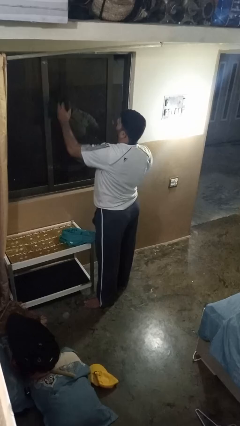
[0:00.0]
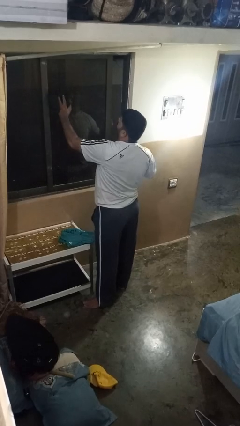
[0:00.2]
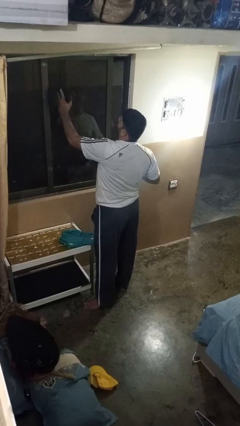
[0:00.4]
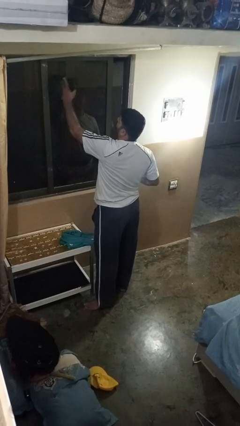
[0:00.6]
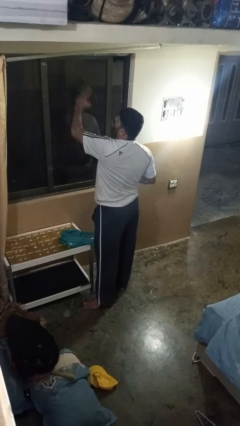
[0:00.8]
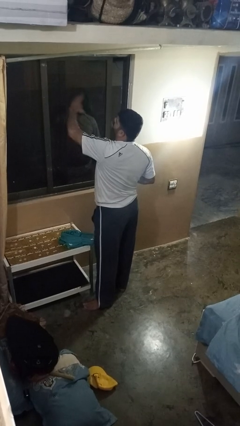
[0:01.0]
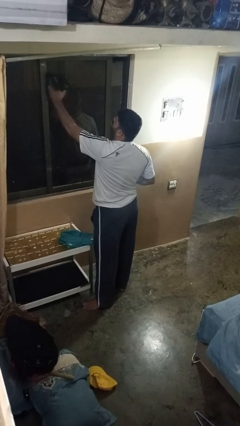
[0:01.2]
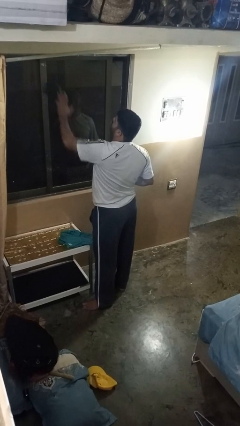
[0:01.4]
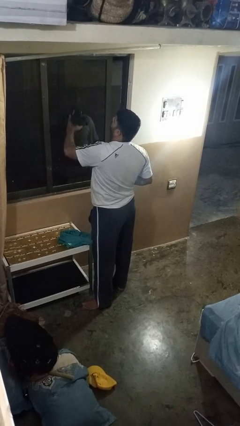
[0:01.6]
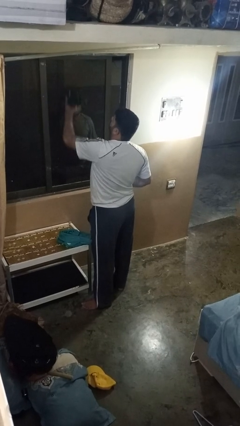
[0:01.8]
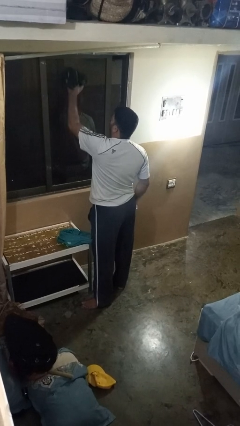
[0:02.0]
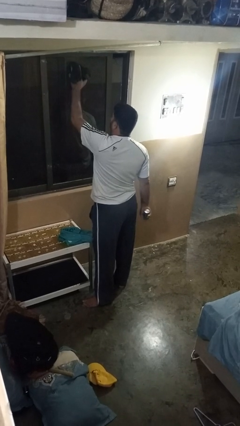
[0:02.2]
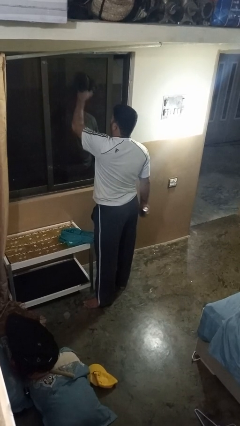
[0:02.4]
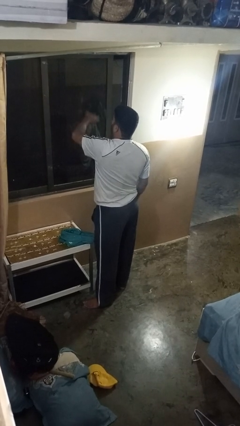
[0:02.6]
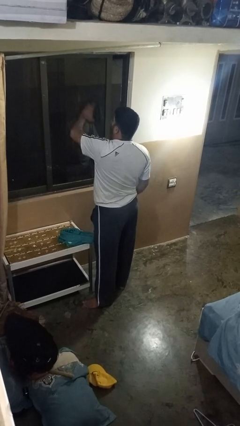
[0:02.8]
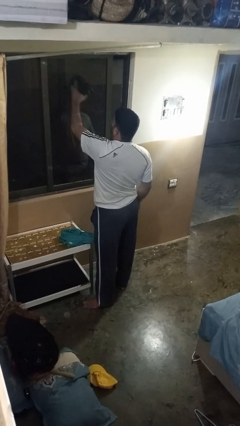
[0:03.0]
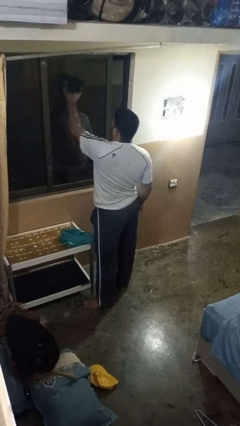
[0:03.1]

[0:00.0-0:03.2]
person washes window

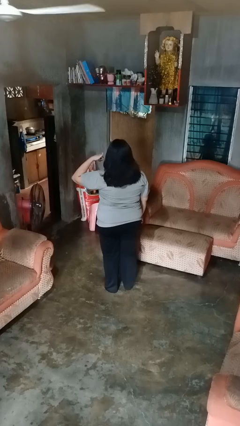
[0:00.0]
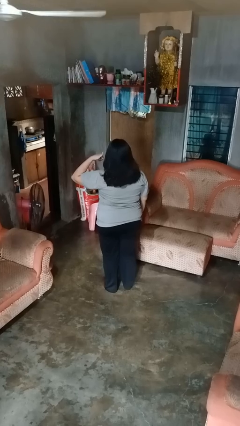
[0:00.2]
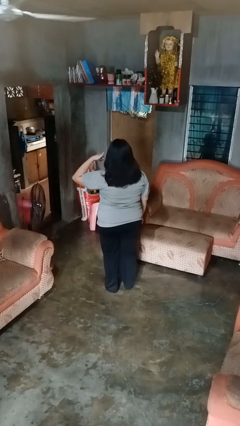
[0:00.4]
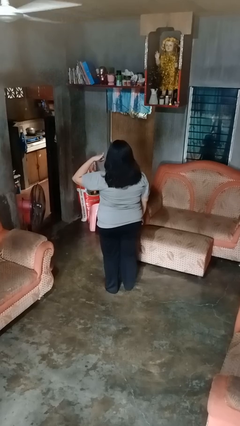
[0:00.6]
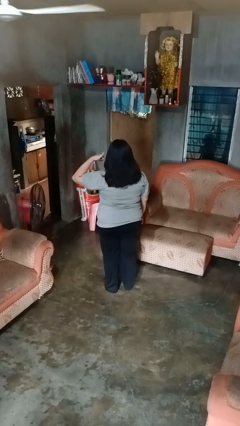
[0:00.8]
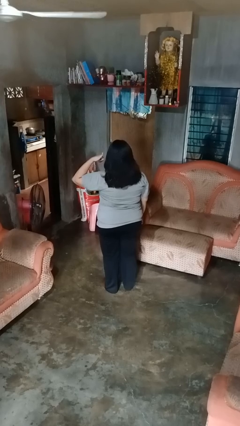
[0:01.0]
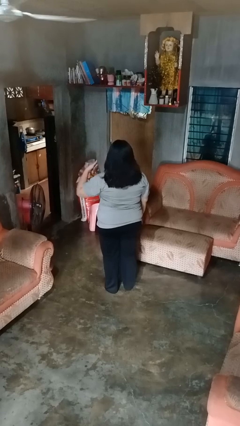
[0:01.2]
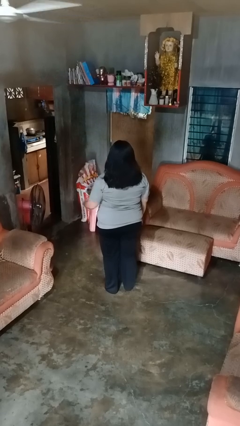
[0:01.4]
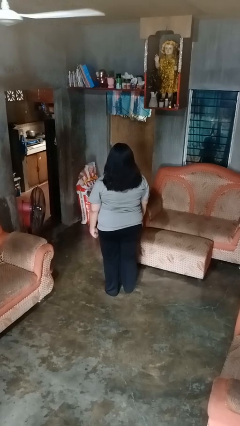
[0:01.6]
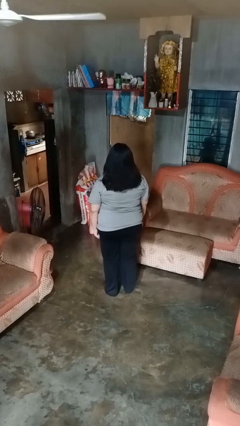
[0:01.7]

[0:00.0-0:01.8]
person gestures call me

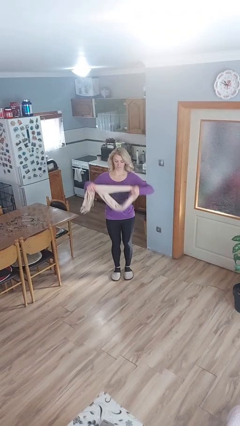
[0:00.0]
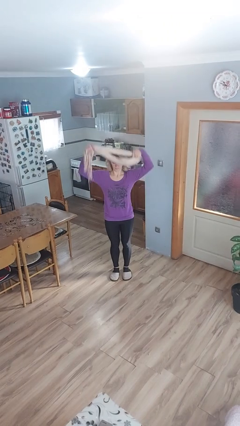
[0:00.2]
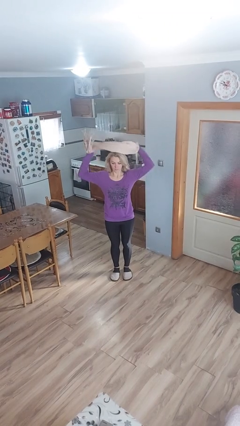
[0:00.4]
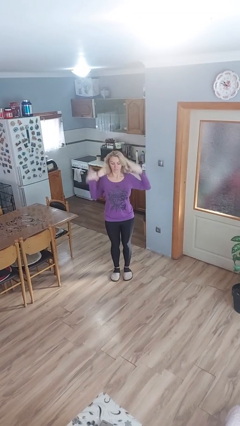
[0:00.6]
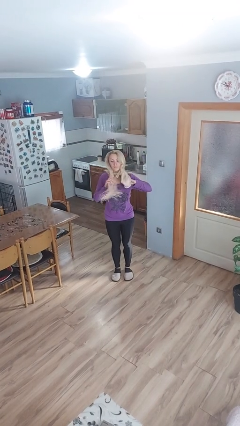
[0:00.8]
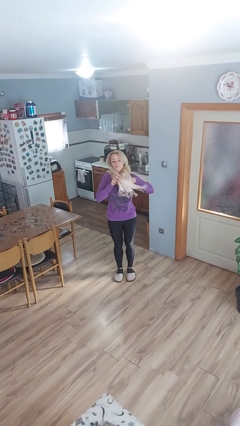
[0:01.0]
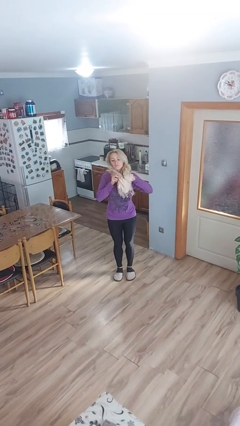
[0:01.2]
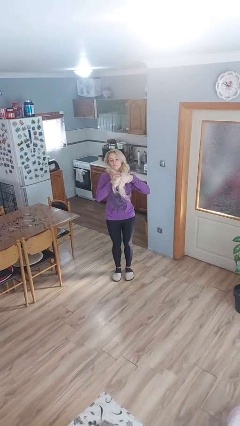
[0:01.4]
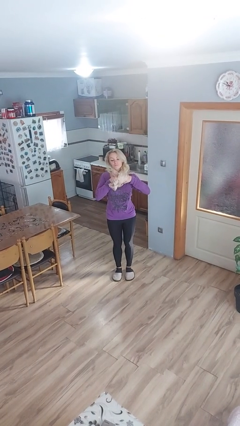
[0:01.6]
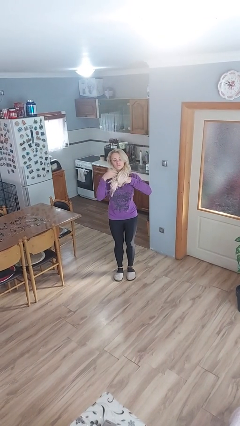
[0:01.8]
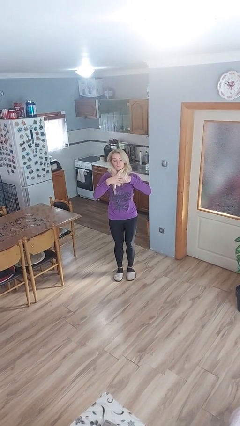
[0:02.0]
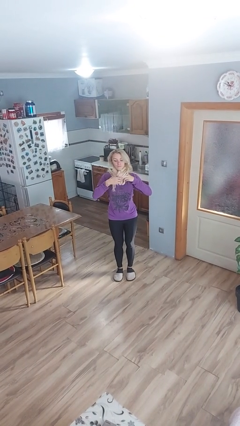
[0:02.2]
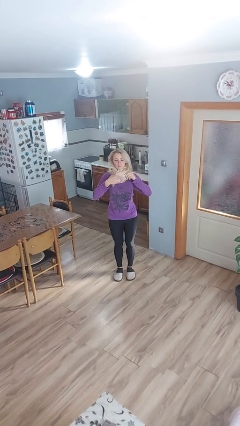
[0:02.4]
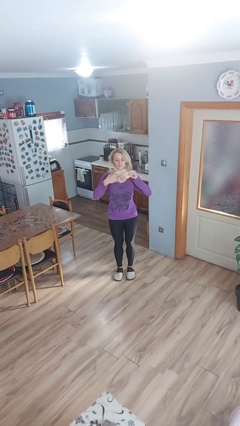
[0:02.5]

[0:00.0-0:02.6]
person puts on scarf

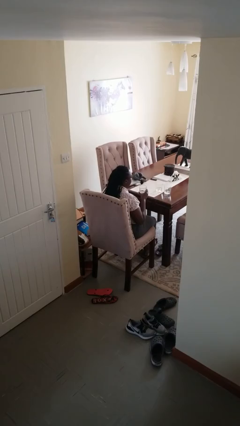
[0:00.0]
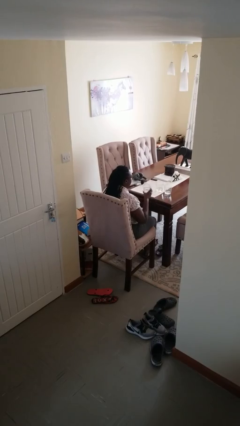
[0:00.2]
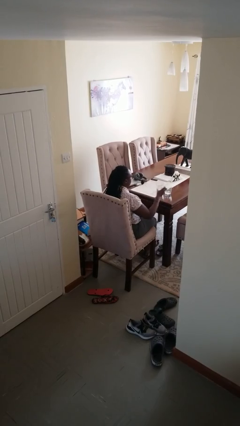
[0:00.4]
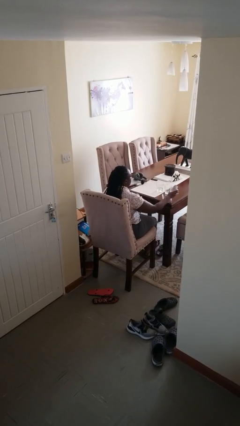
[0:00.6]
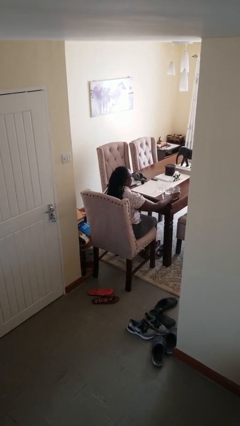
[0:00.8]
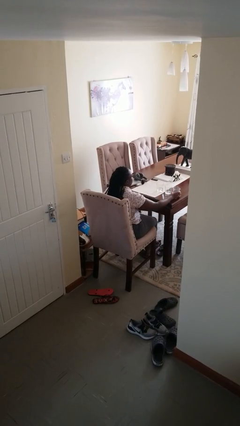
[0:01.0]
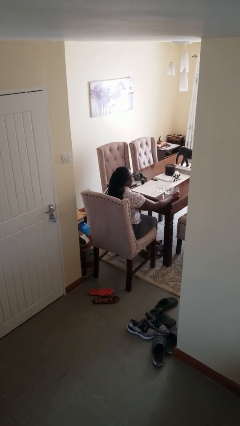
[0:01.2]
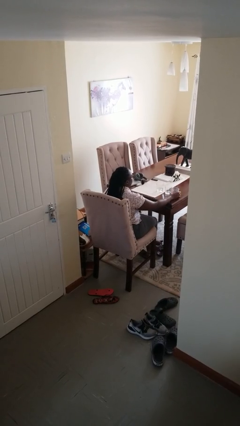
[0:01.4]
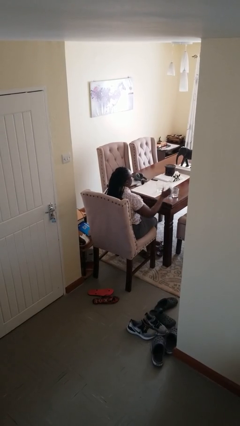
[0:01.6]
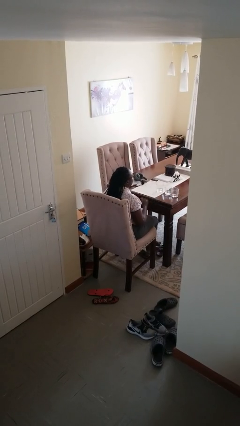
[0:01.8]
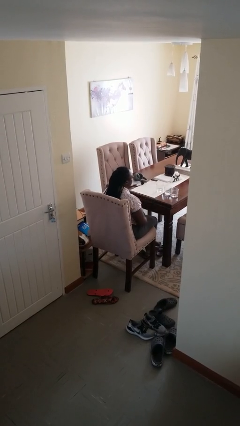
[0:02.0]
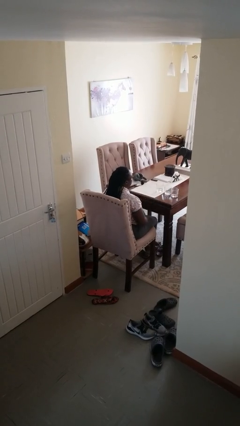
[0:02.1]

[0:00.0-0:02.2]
person puts down object on table

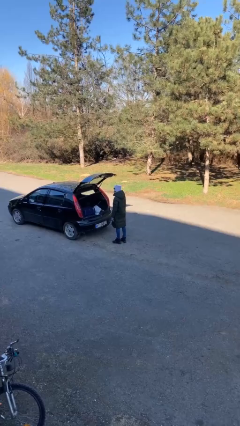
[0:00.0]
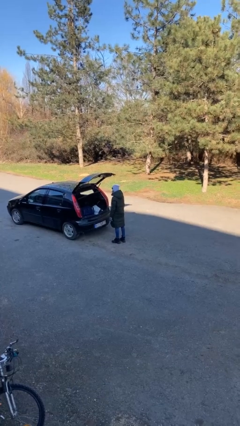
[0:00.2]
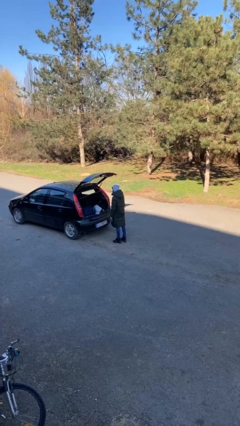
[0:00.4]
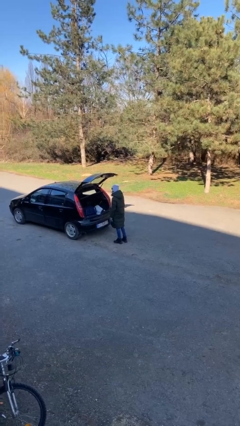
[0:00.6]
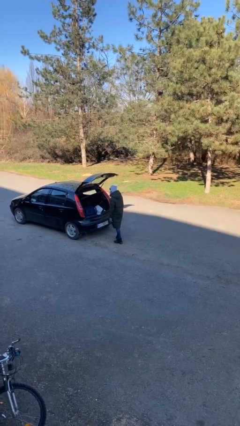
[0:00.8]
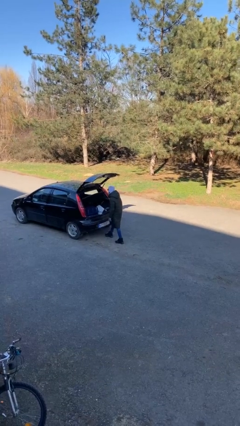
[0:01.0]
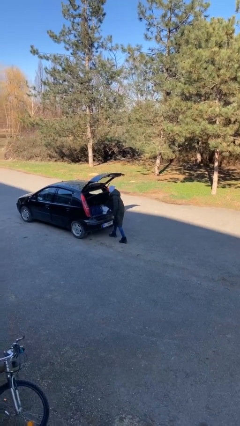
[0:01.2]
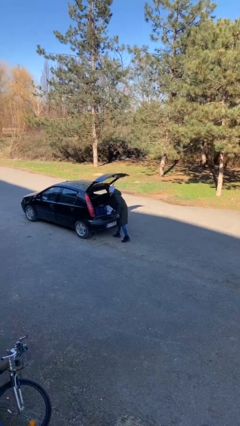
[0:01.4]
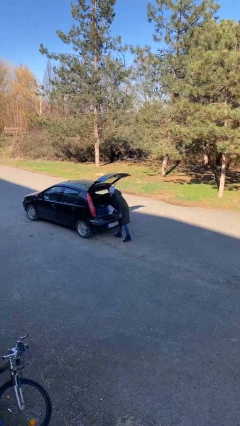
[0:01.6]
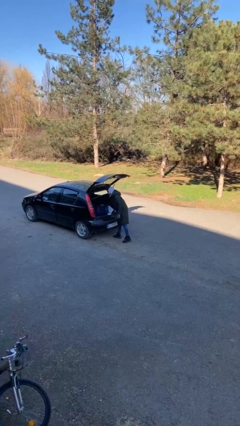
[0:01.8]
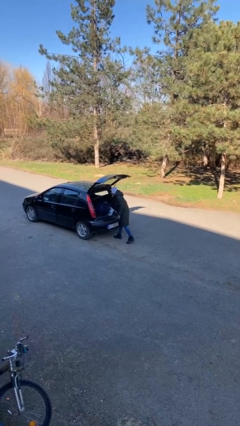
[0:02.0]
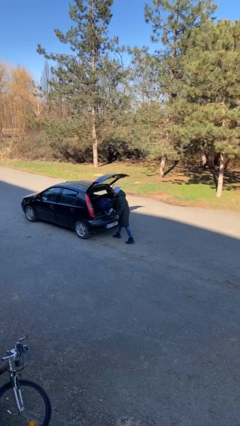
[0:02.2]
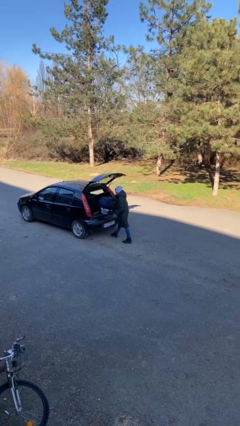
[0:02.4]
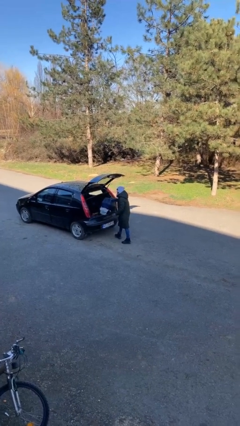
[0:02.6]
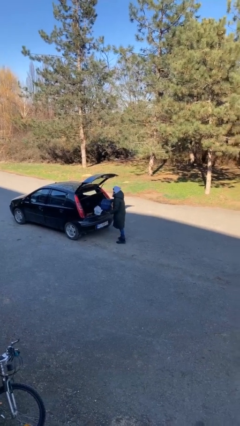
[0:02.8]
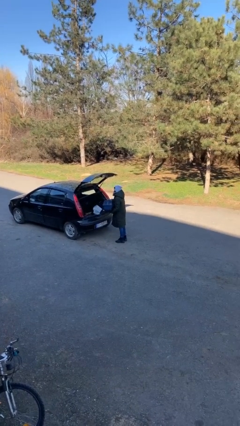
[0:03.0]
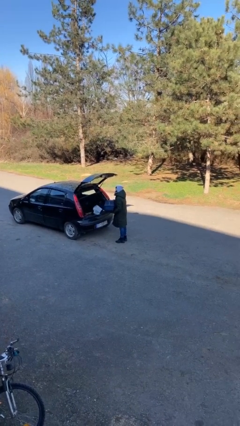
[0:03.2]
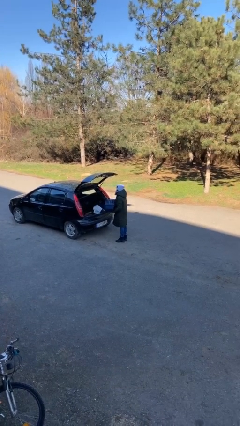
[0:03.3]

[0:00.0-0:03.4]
person unloads car

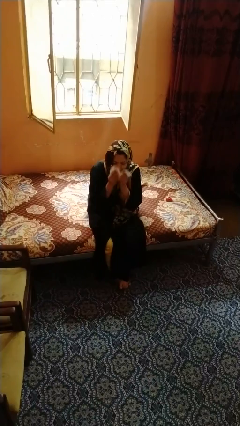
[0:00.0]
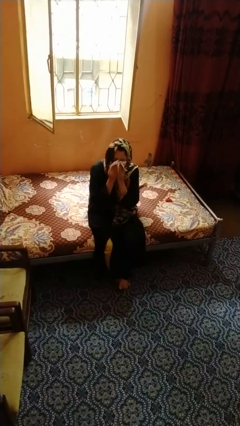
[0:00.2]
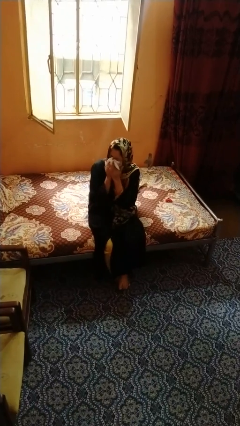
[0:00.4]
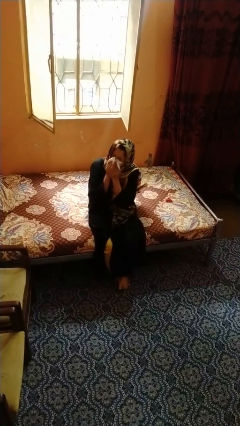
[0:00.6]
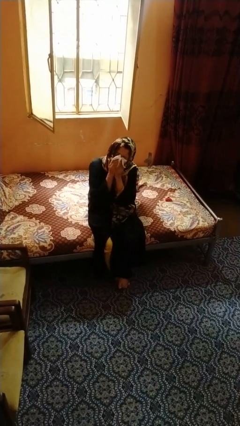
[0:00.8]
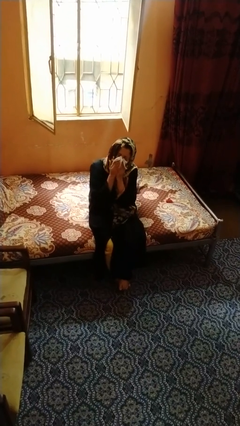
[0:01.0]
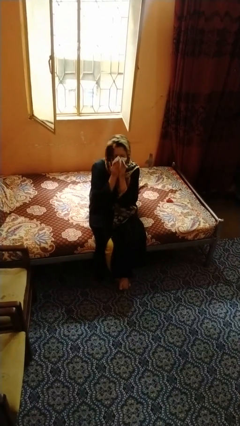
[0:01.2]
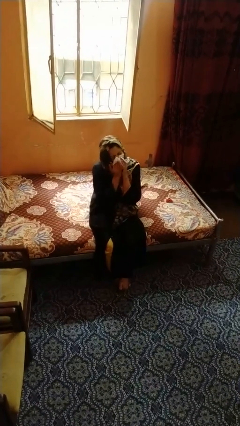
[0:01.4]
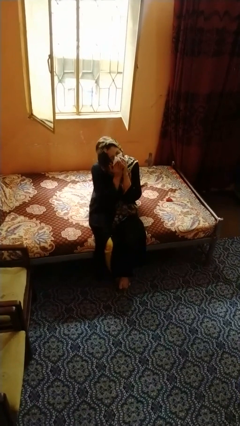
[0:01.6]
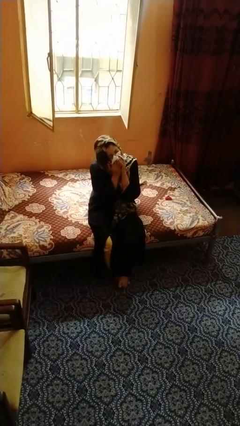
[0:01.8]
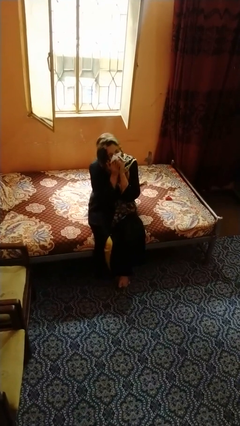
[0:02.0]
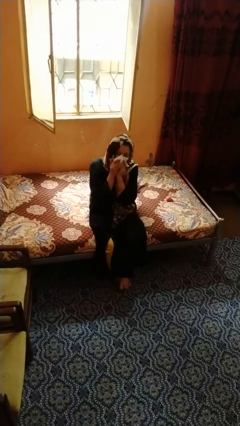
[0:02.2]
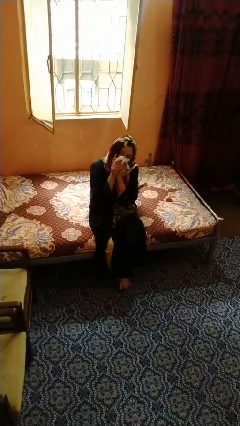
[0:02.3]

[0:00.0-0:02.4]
person blows nose

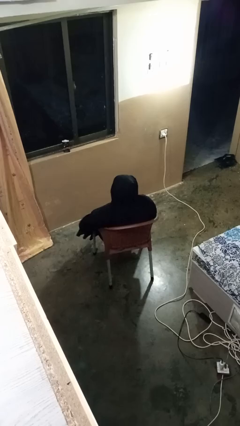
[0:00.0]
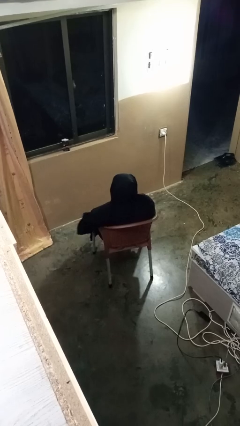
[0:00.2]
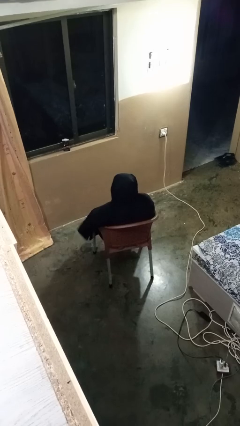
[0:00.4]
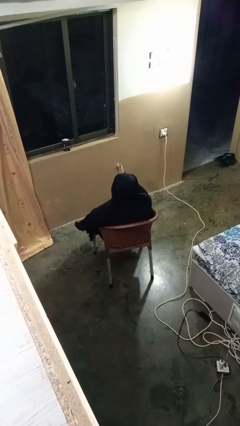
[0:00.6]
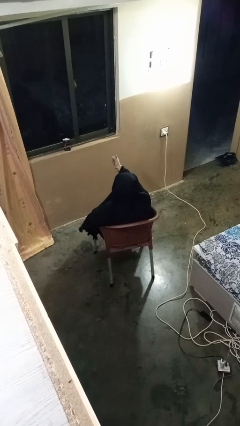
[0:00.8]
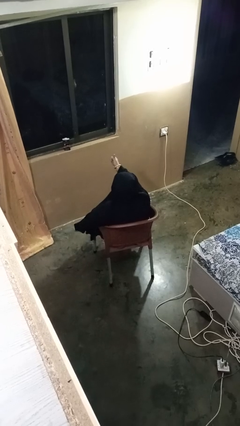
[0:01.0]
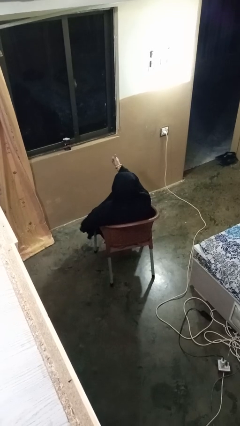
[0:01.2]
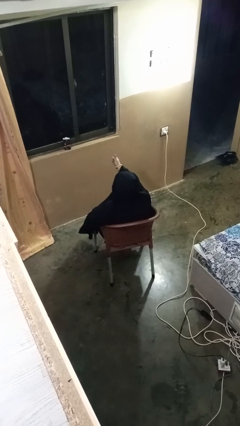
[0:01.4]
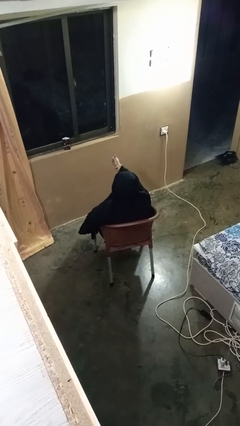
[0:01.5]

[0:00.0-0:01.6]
person gestures thumbs up
